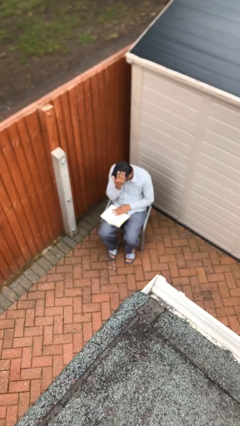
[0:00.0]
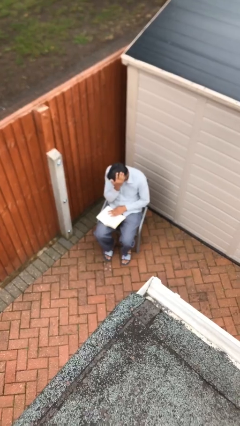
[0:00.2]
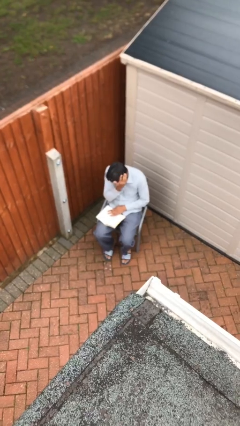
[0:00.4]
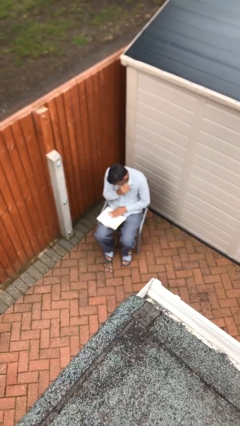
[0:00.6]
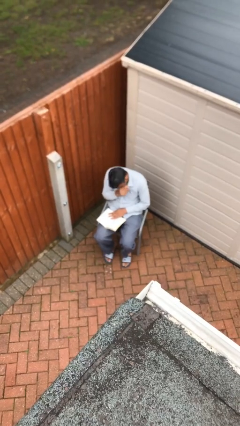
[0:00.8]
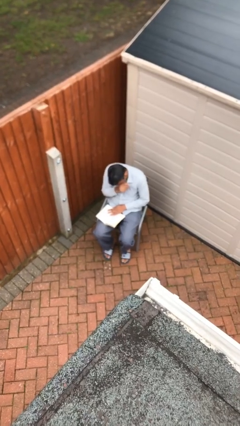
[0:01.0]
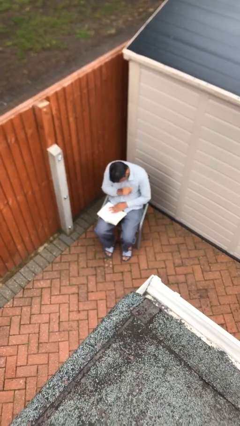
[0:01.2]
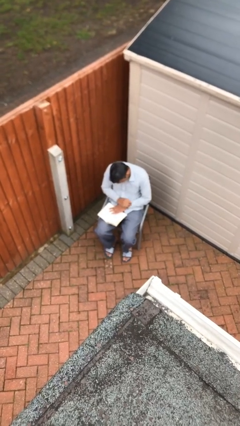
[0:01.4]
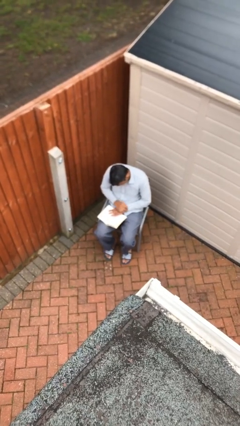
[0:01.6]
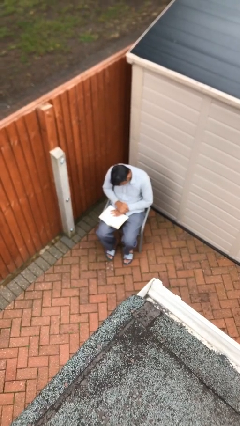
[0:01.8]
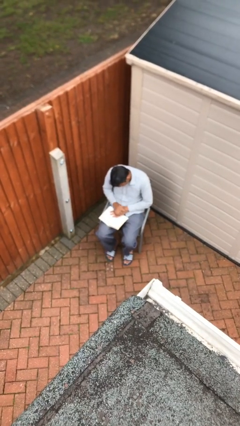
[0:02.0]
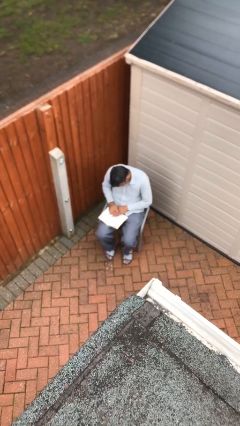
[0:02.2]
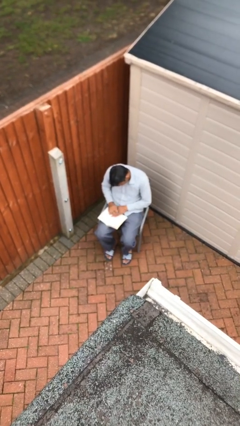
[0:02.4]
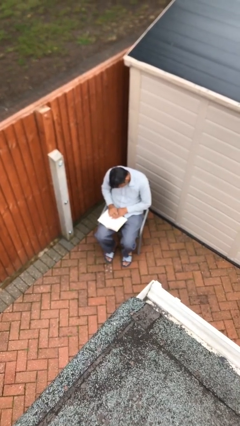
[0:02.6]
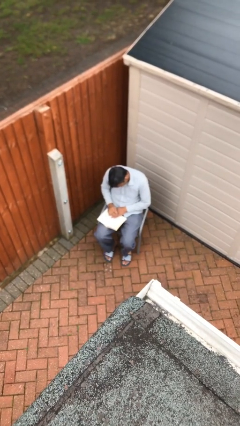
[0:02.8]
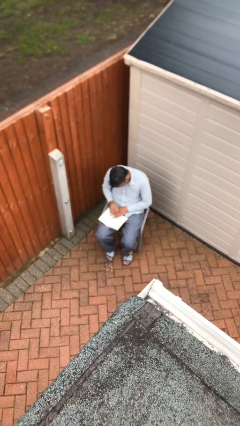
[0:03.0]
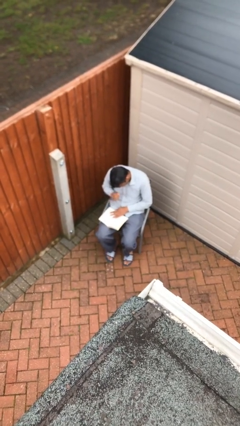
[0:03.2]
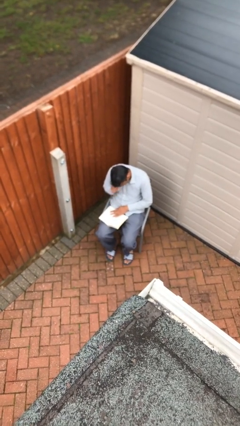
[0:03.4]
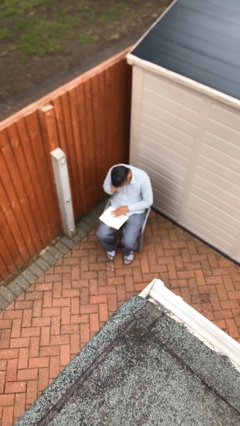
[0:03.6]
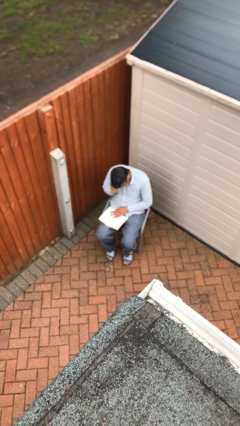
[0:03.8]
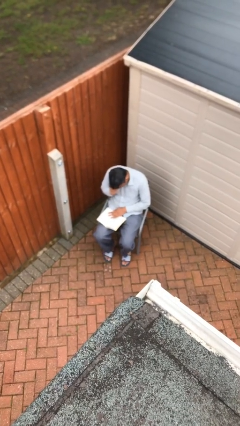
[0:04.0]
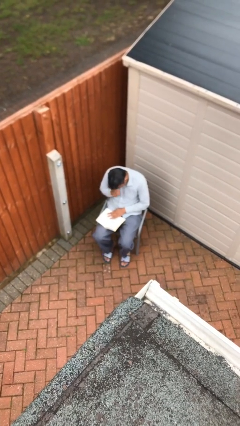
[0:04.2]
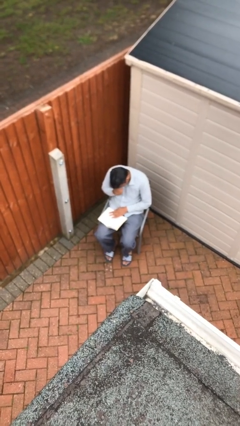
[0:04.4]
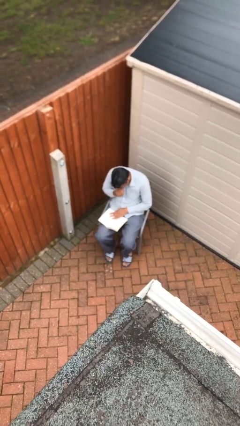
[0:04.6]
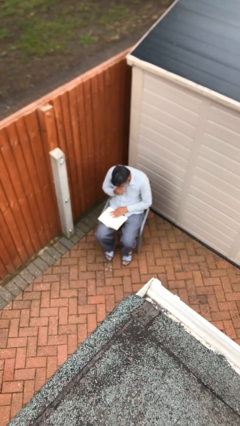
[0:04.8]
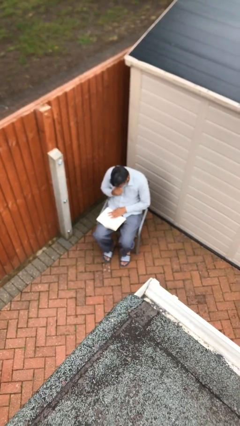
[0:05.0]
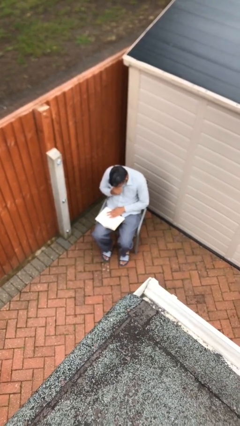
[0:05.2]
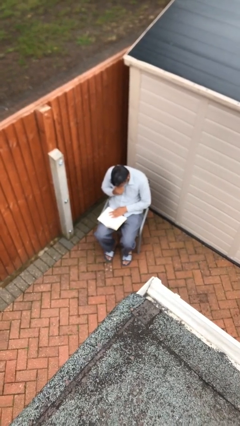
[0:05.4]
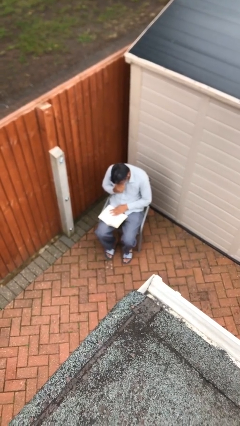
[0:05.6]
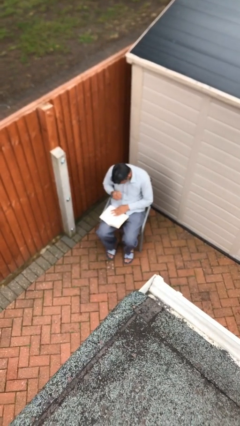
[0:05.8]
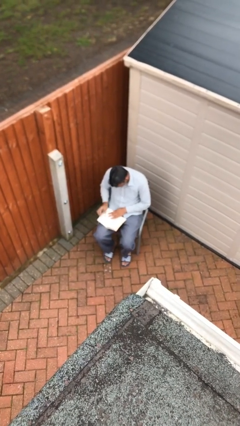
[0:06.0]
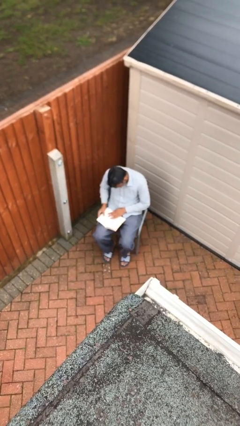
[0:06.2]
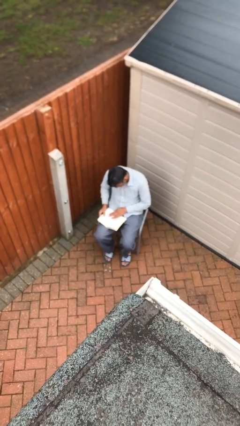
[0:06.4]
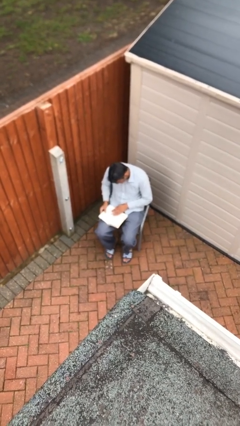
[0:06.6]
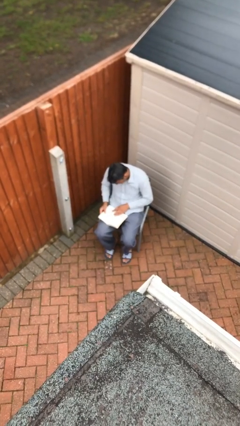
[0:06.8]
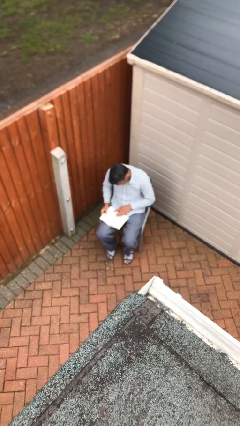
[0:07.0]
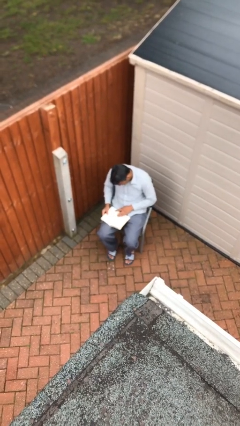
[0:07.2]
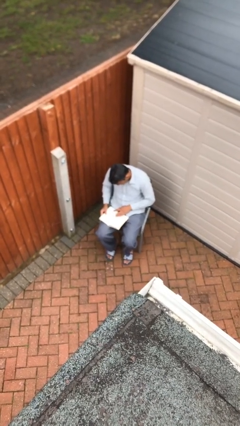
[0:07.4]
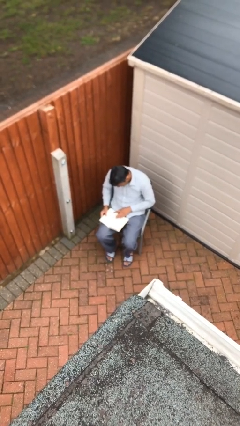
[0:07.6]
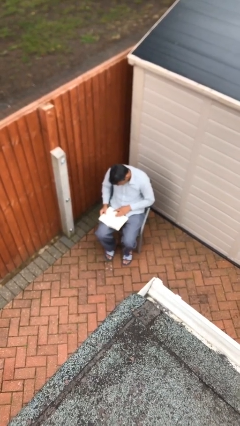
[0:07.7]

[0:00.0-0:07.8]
person reads document

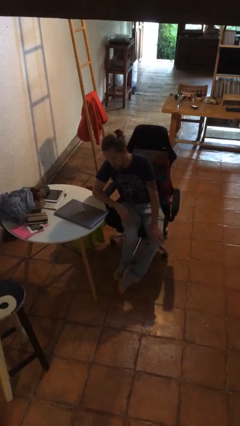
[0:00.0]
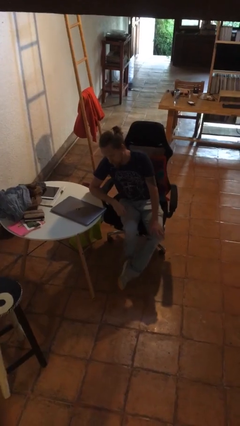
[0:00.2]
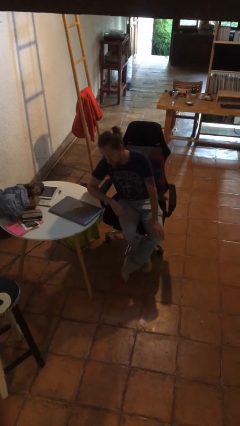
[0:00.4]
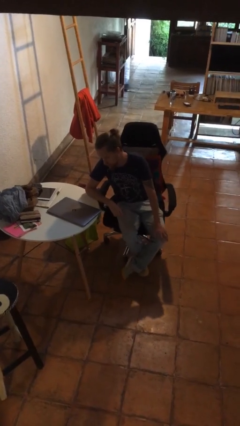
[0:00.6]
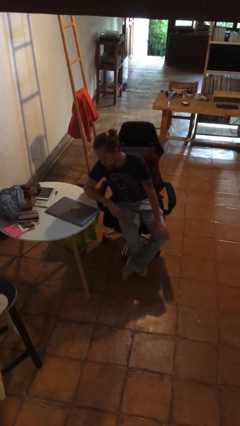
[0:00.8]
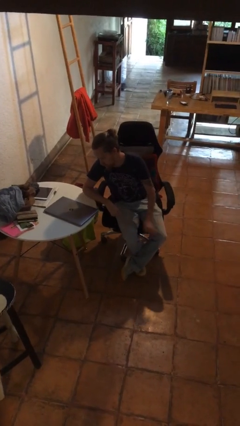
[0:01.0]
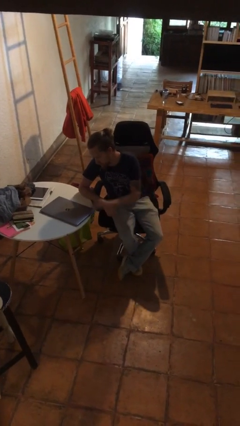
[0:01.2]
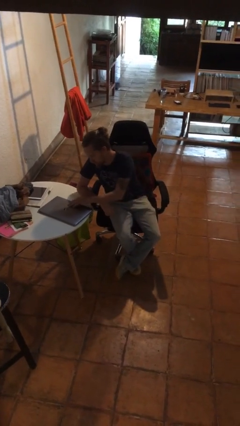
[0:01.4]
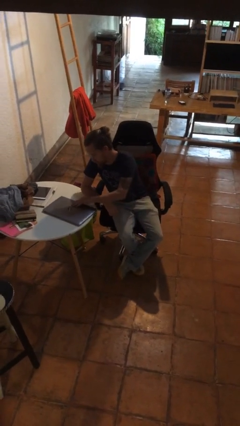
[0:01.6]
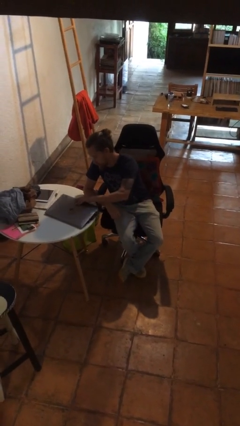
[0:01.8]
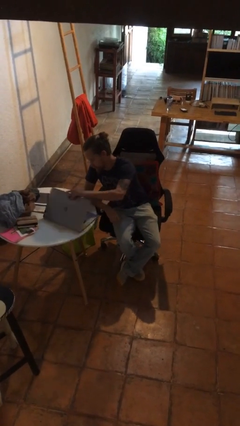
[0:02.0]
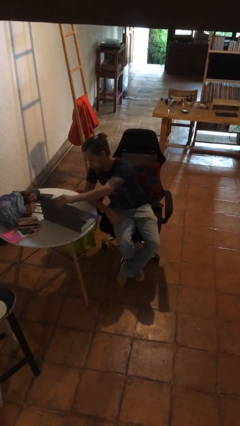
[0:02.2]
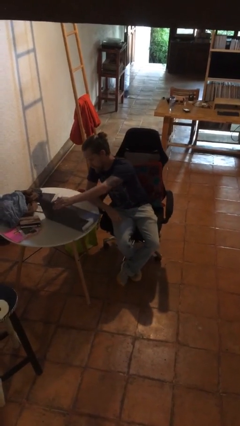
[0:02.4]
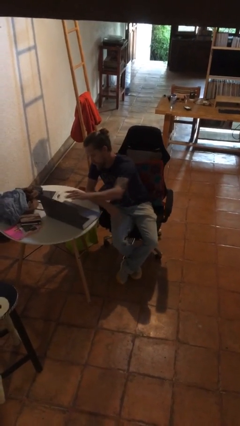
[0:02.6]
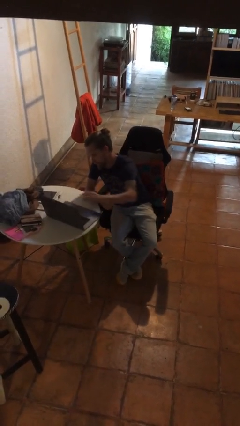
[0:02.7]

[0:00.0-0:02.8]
person opens laptop

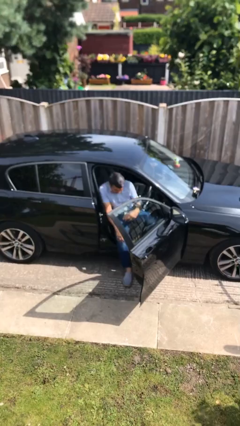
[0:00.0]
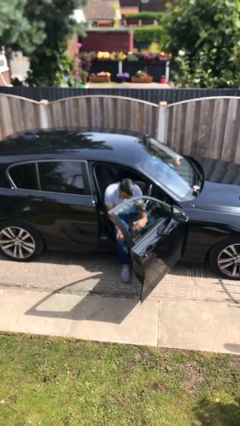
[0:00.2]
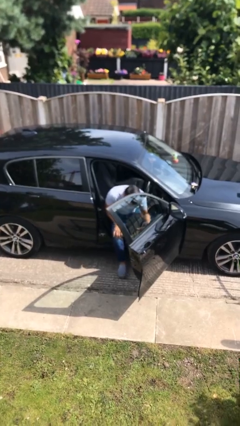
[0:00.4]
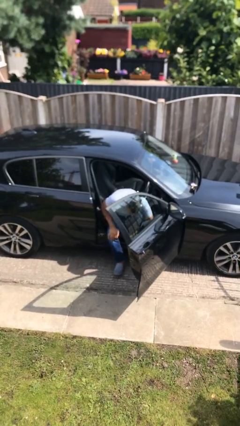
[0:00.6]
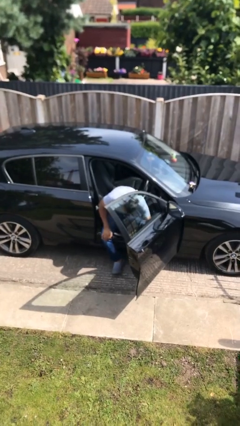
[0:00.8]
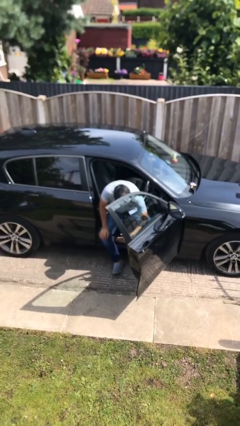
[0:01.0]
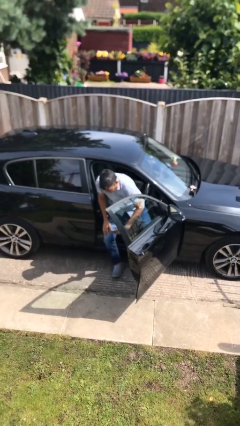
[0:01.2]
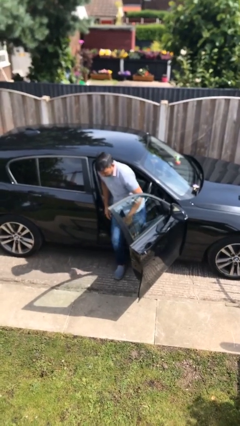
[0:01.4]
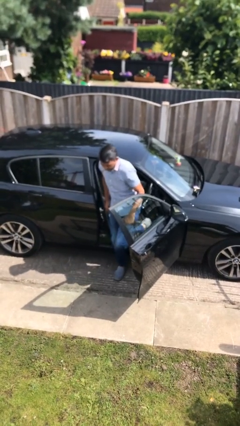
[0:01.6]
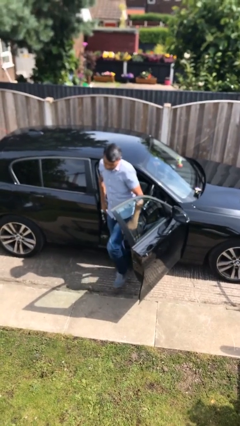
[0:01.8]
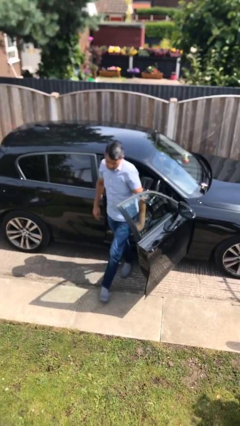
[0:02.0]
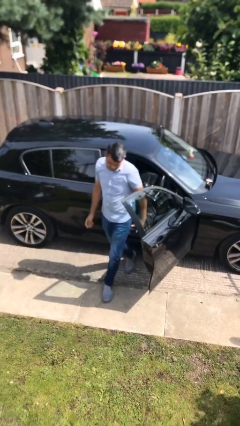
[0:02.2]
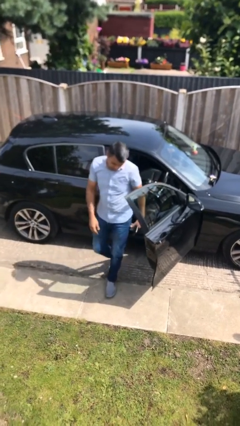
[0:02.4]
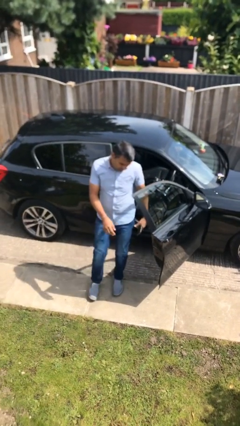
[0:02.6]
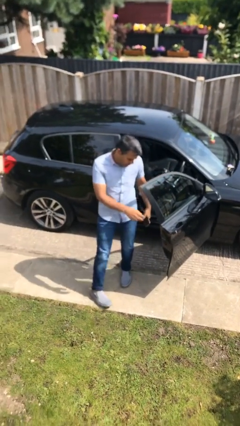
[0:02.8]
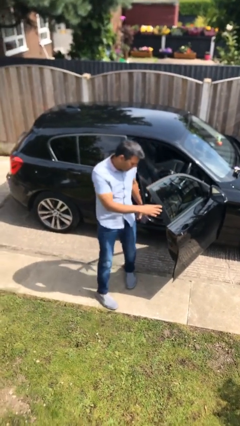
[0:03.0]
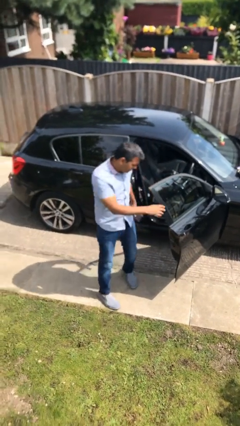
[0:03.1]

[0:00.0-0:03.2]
person exits car

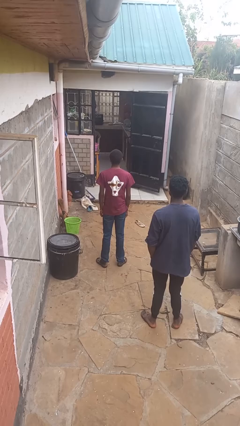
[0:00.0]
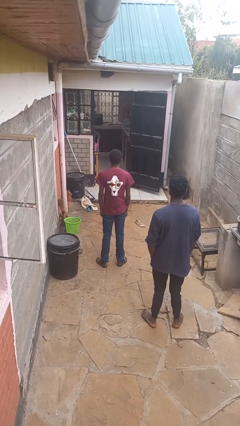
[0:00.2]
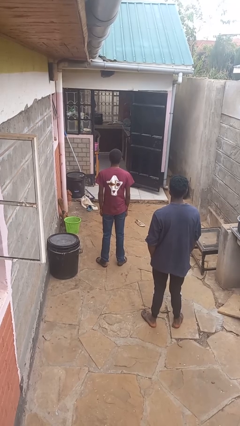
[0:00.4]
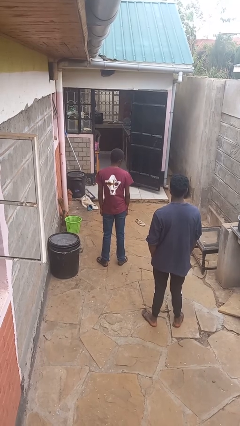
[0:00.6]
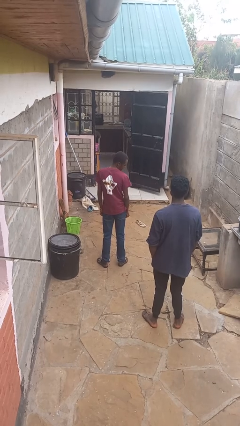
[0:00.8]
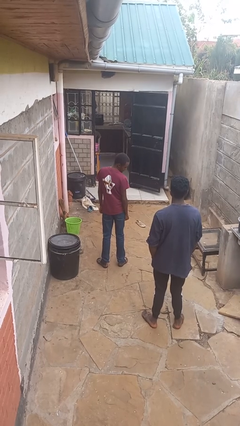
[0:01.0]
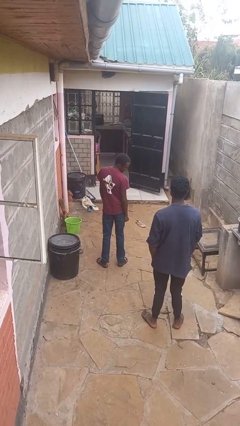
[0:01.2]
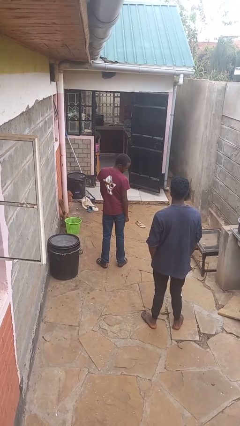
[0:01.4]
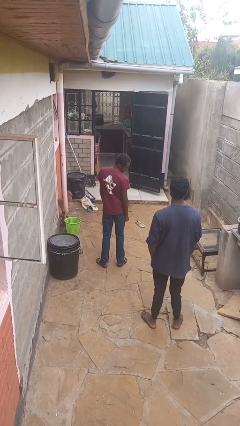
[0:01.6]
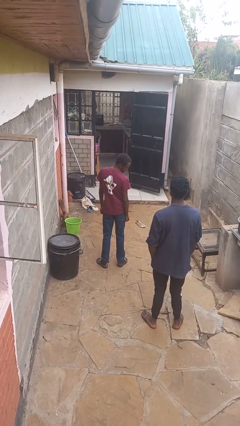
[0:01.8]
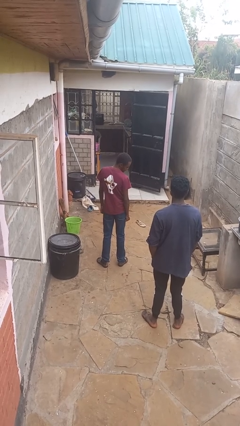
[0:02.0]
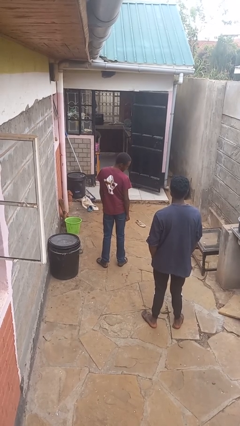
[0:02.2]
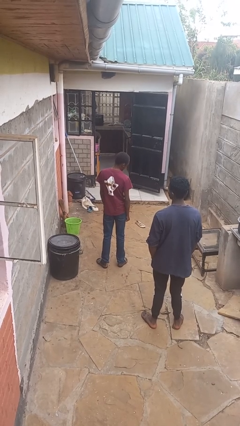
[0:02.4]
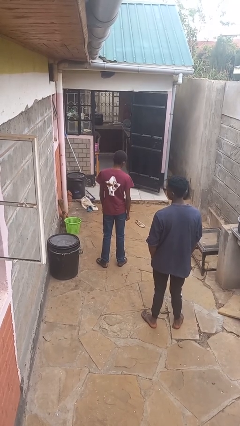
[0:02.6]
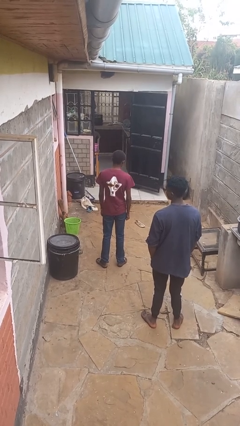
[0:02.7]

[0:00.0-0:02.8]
person looks over shoulder

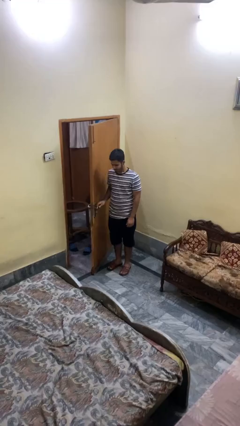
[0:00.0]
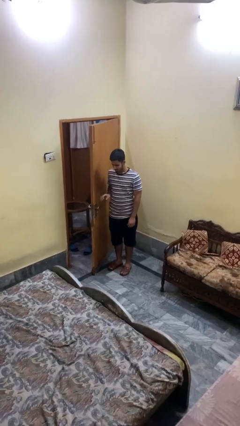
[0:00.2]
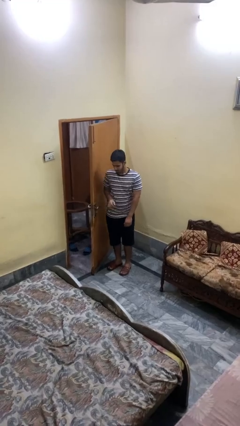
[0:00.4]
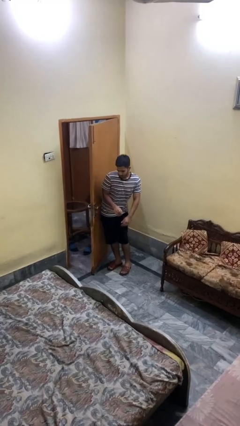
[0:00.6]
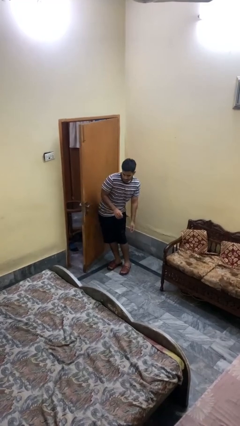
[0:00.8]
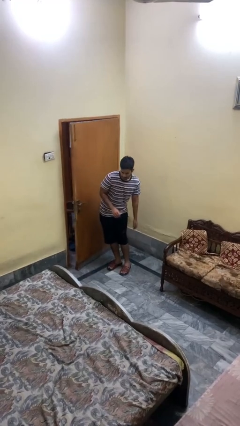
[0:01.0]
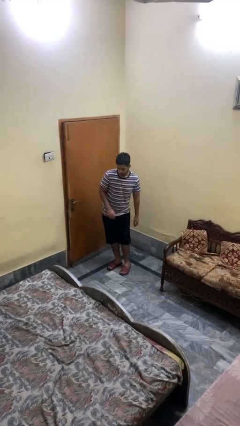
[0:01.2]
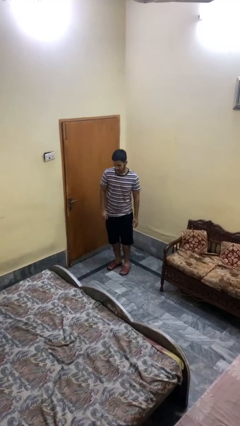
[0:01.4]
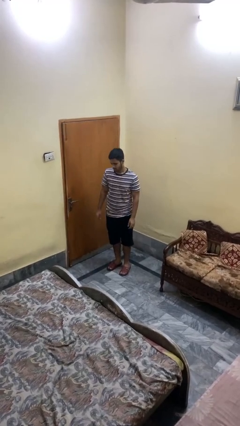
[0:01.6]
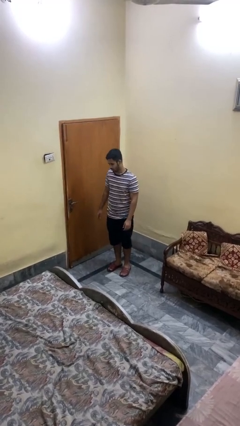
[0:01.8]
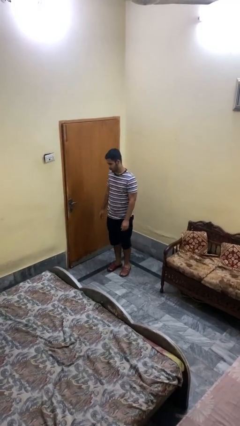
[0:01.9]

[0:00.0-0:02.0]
person closes door with hip
